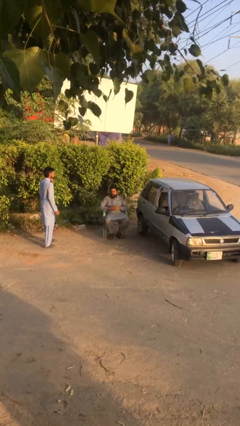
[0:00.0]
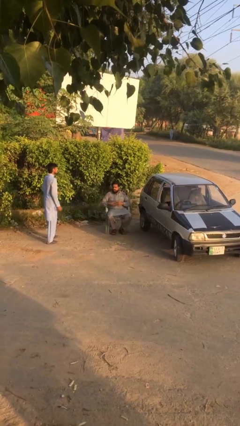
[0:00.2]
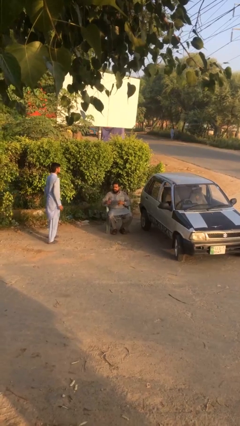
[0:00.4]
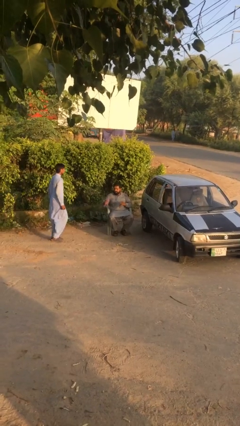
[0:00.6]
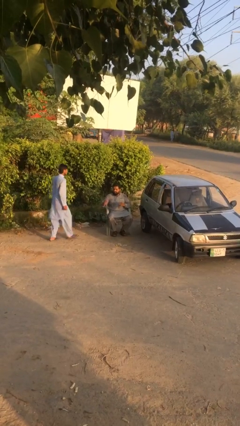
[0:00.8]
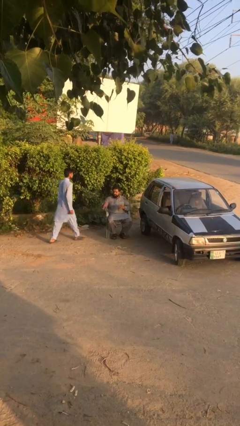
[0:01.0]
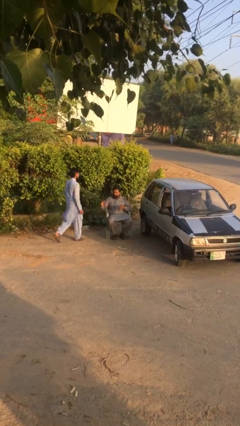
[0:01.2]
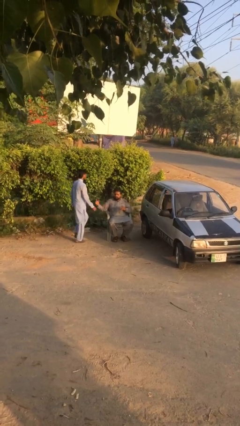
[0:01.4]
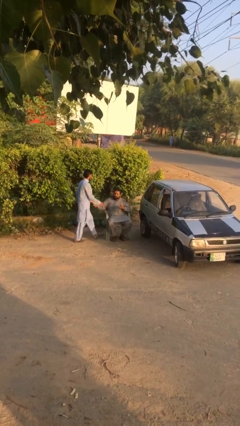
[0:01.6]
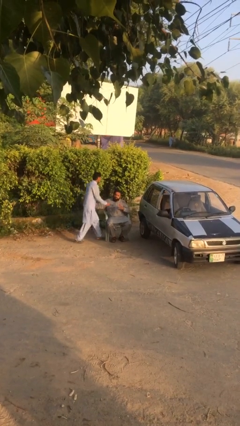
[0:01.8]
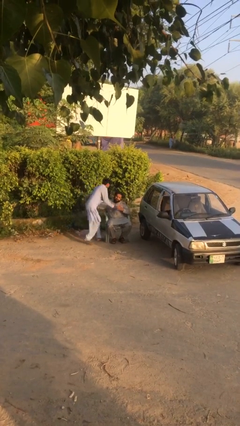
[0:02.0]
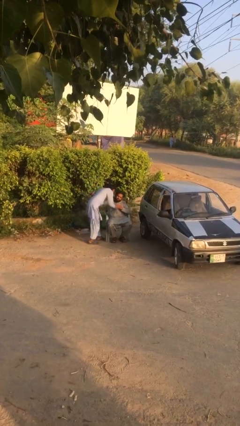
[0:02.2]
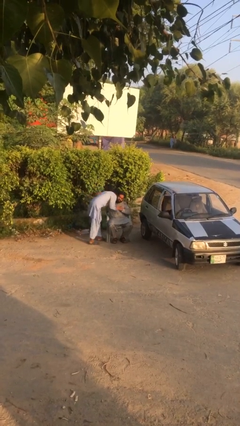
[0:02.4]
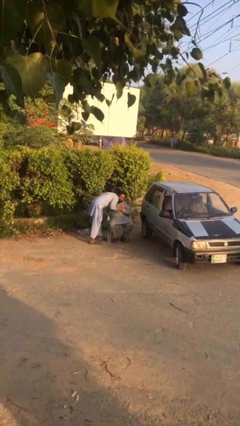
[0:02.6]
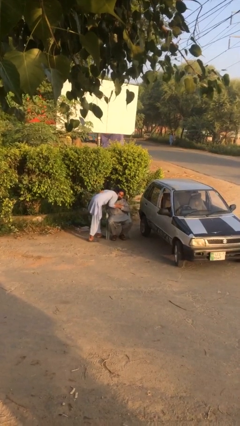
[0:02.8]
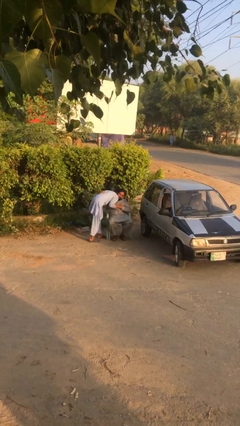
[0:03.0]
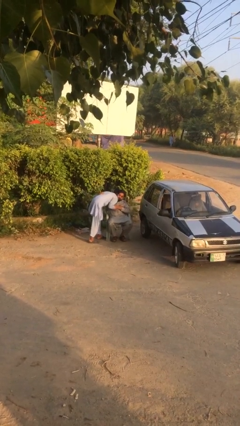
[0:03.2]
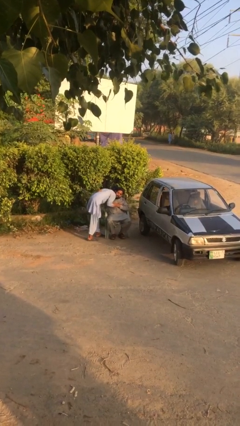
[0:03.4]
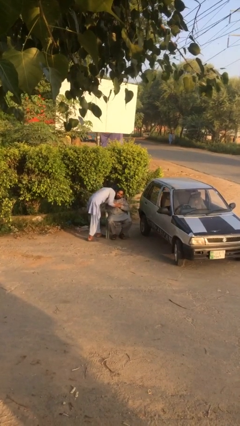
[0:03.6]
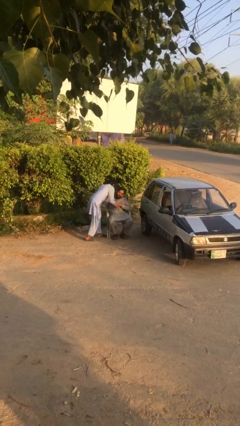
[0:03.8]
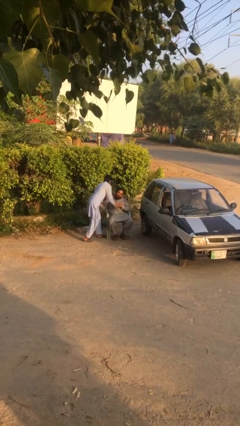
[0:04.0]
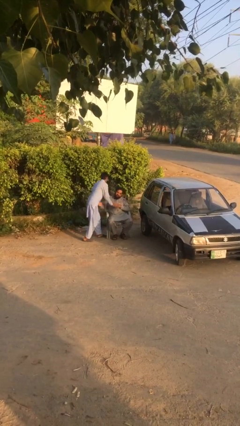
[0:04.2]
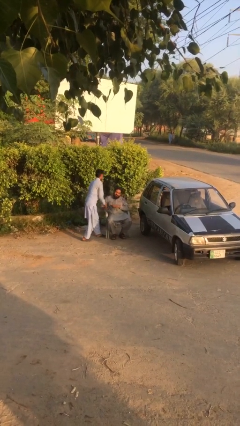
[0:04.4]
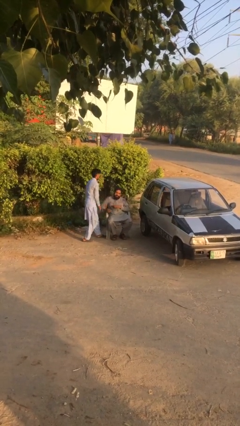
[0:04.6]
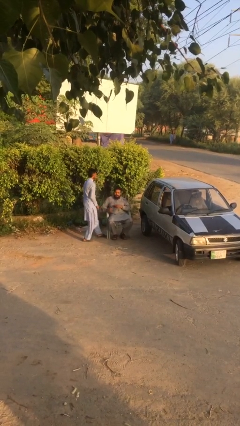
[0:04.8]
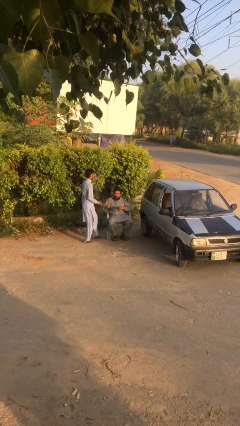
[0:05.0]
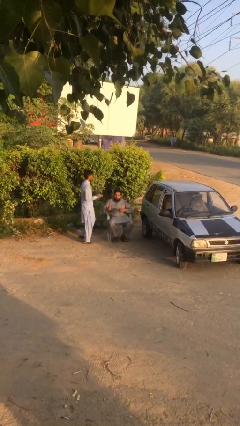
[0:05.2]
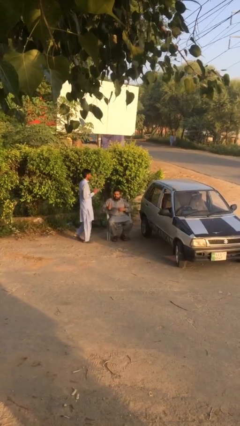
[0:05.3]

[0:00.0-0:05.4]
person embraces person

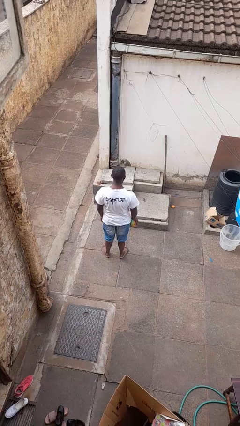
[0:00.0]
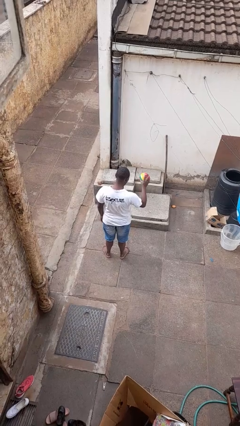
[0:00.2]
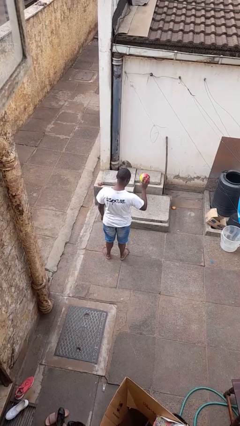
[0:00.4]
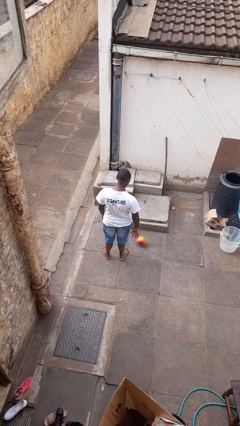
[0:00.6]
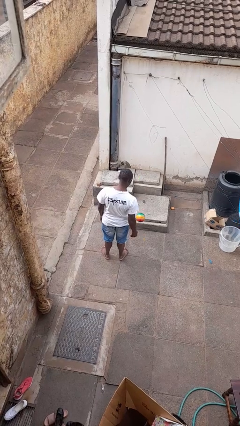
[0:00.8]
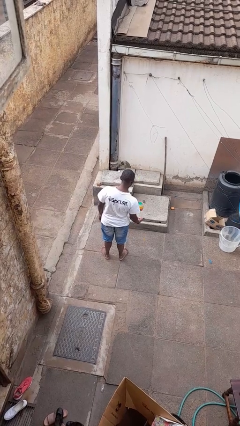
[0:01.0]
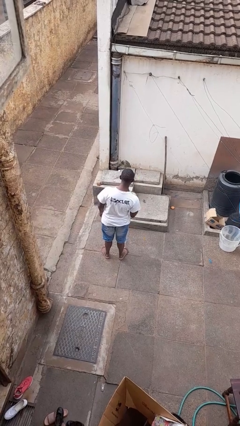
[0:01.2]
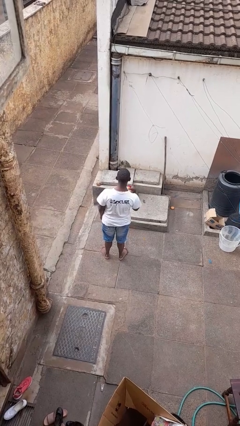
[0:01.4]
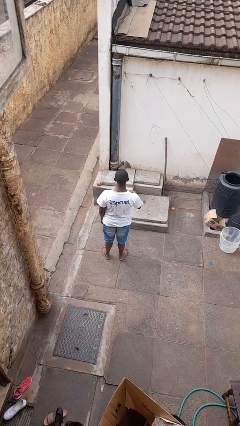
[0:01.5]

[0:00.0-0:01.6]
person bounces ball on floor

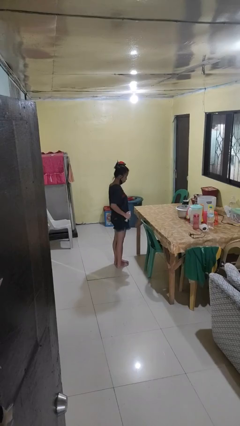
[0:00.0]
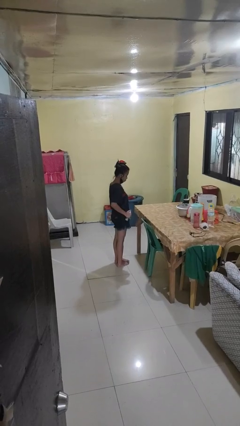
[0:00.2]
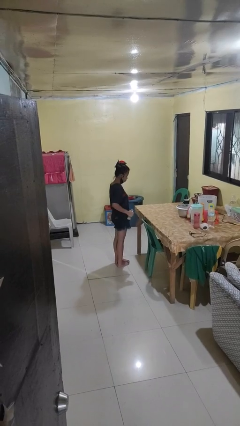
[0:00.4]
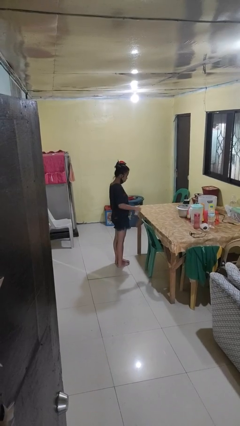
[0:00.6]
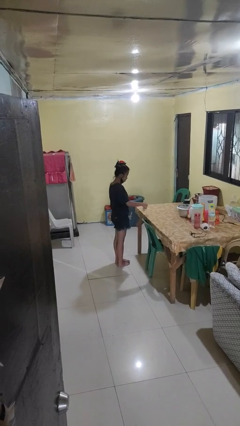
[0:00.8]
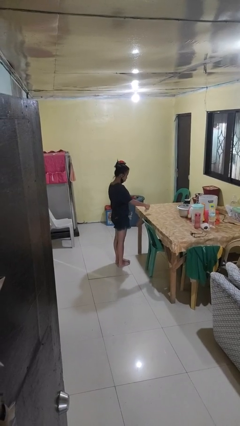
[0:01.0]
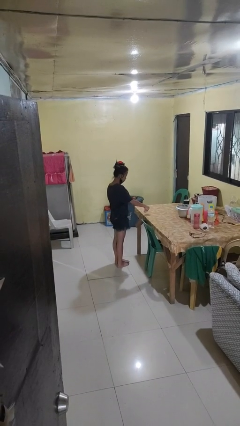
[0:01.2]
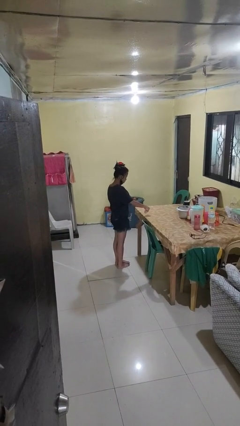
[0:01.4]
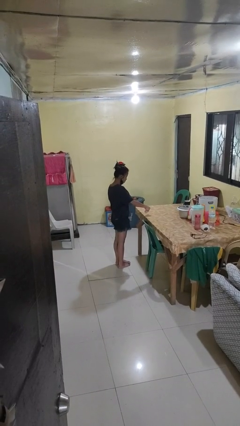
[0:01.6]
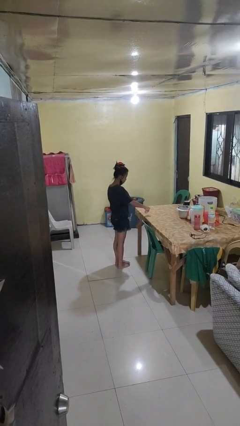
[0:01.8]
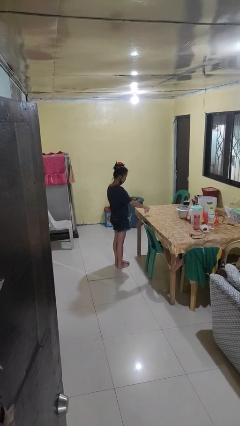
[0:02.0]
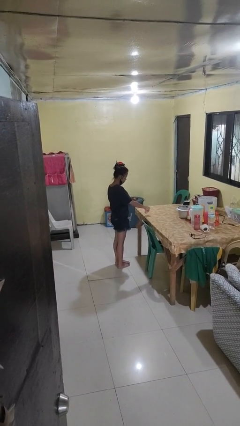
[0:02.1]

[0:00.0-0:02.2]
person sprays from bottle

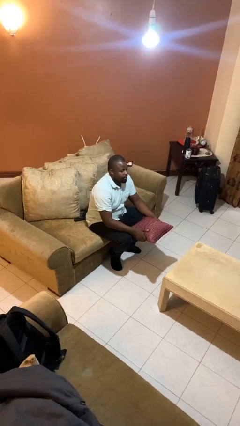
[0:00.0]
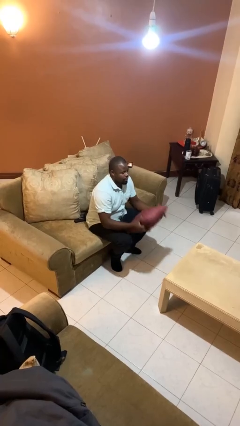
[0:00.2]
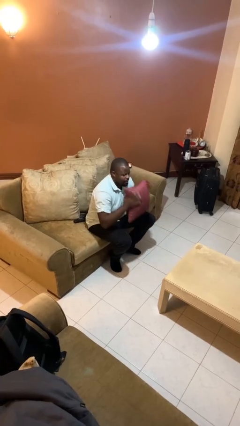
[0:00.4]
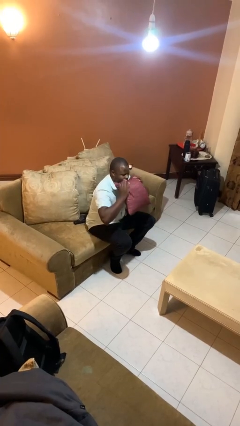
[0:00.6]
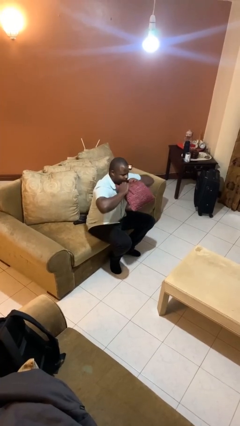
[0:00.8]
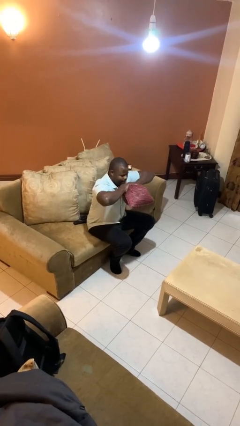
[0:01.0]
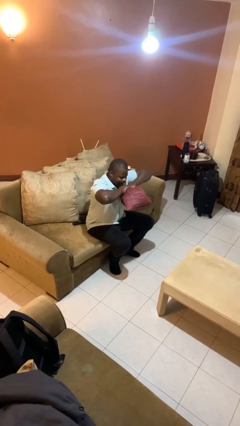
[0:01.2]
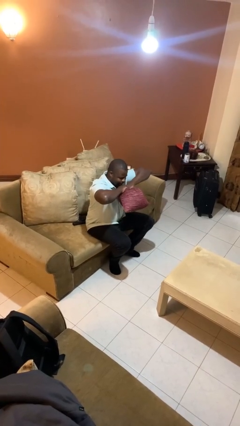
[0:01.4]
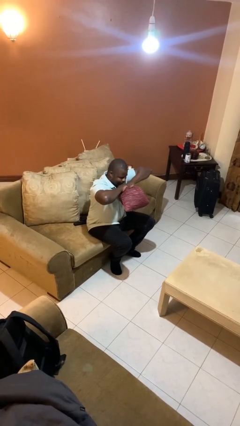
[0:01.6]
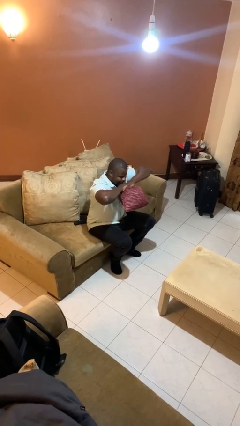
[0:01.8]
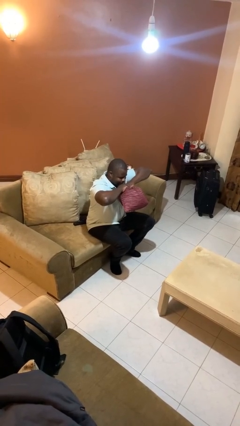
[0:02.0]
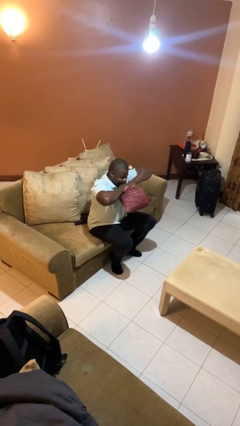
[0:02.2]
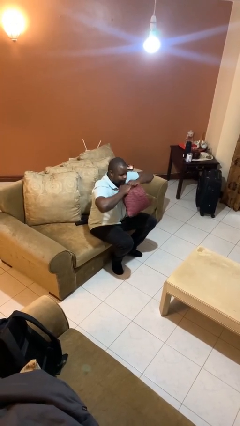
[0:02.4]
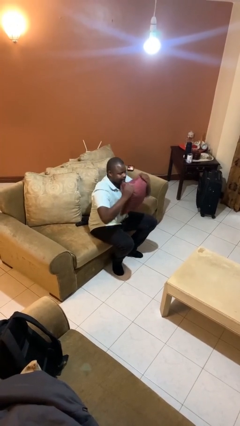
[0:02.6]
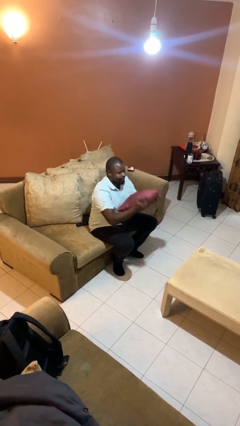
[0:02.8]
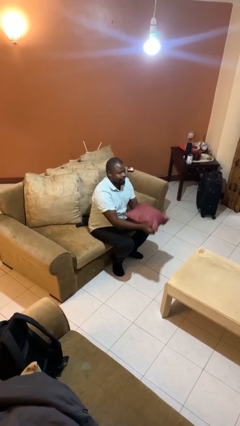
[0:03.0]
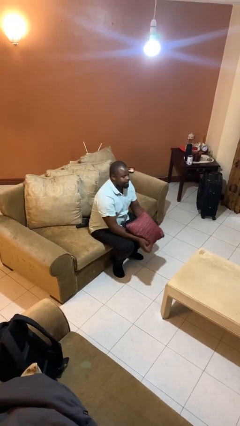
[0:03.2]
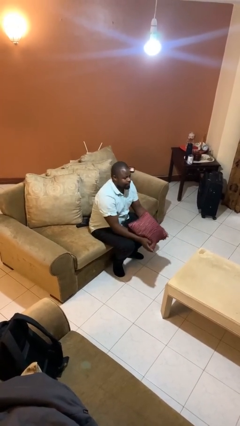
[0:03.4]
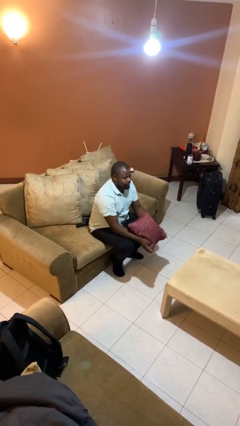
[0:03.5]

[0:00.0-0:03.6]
person squeezes object

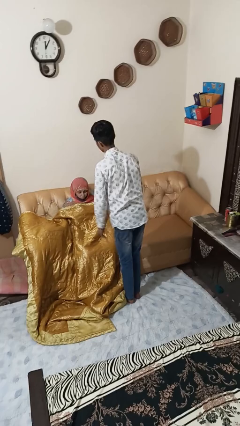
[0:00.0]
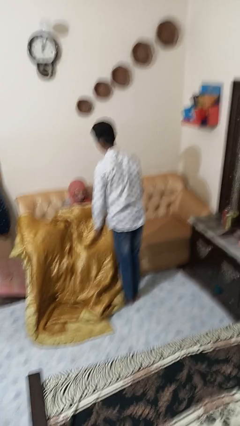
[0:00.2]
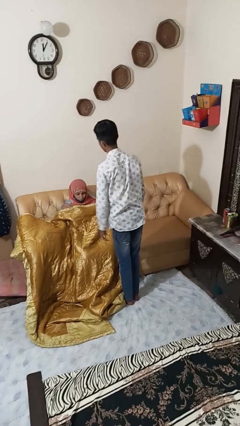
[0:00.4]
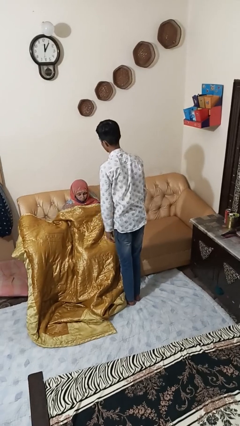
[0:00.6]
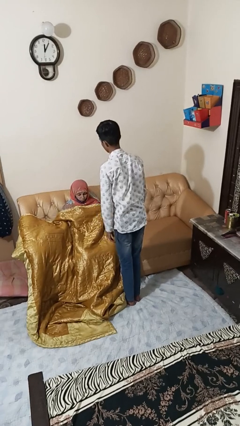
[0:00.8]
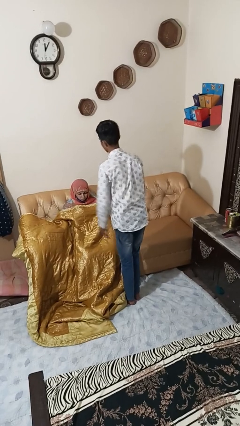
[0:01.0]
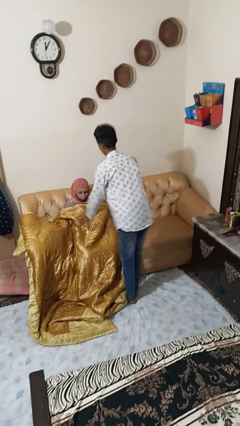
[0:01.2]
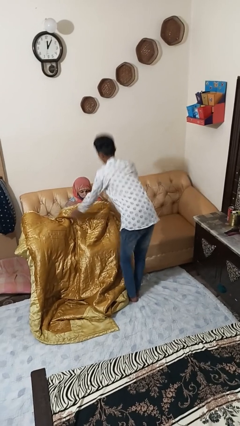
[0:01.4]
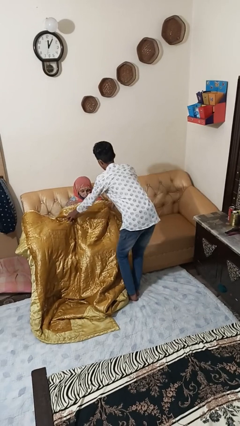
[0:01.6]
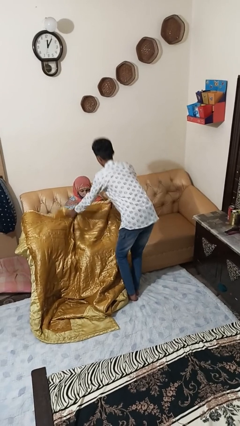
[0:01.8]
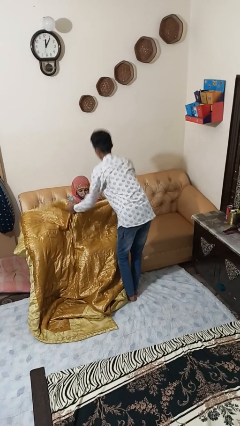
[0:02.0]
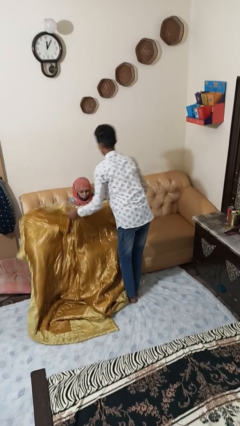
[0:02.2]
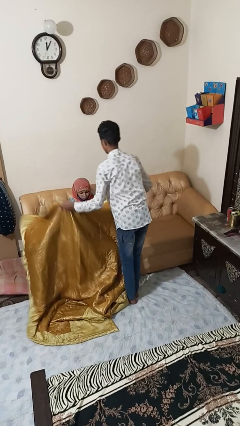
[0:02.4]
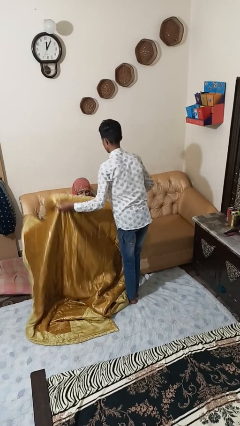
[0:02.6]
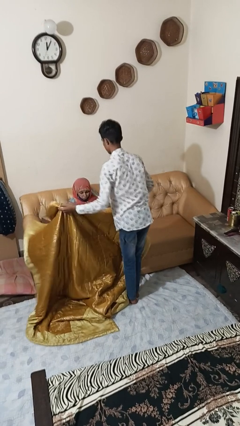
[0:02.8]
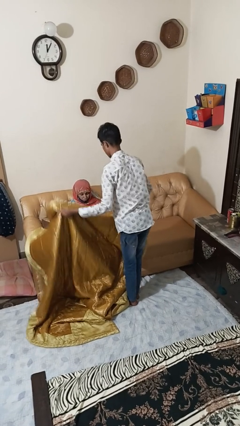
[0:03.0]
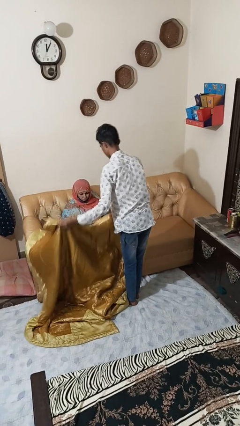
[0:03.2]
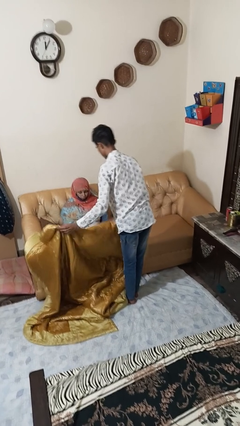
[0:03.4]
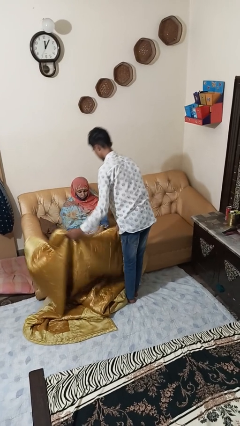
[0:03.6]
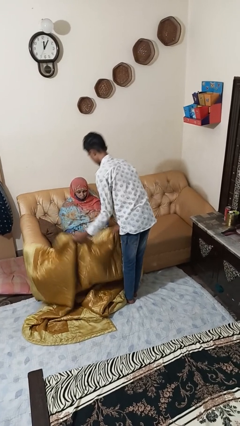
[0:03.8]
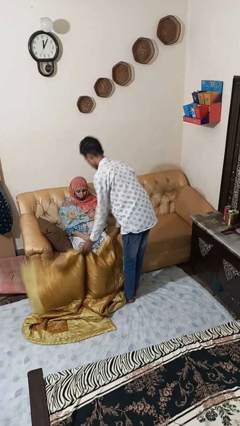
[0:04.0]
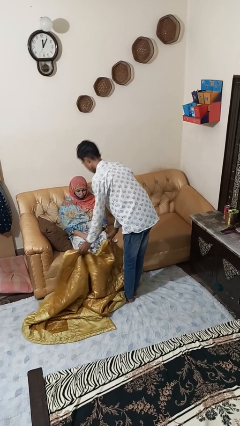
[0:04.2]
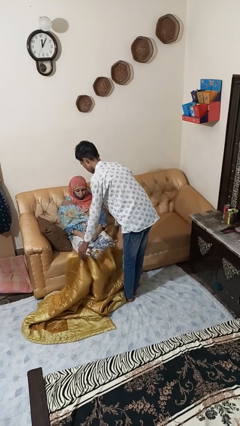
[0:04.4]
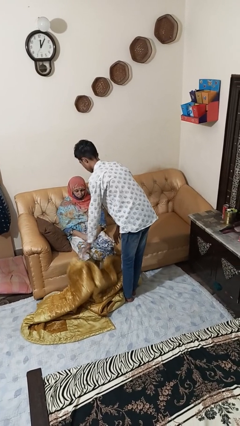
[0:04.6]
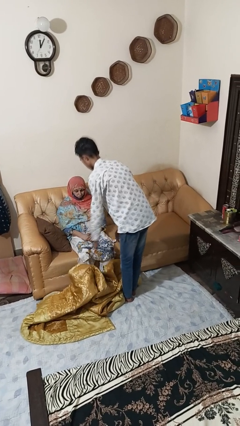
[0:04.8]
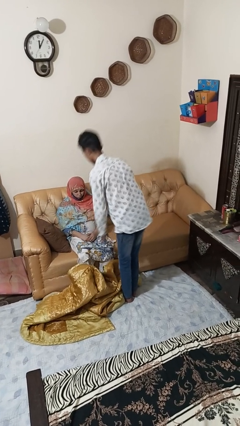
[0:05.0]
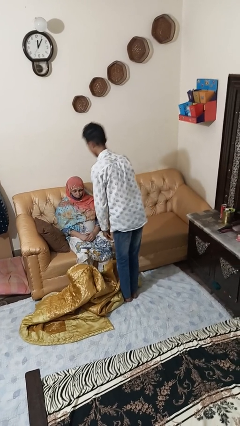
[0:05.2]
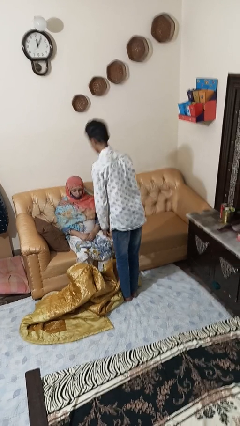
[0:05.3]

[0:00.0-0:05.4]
person uncovers friend with blanket
